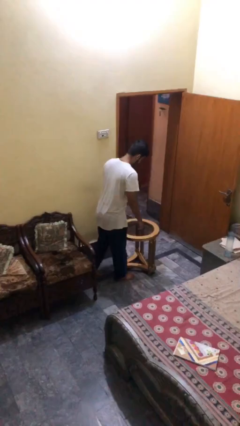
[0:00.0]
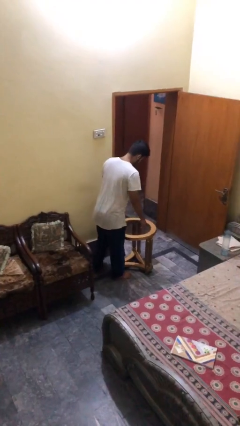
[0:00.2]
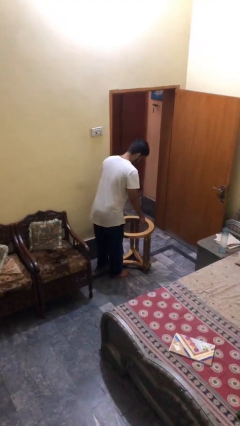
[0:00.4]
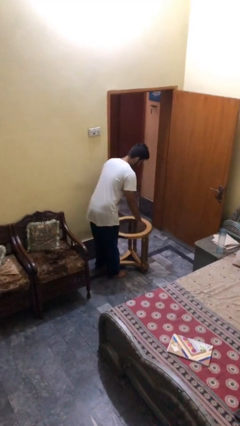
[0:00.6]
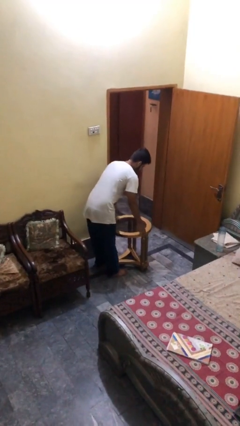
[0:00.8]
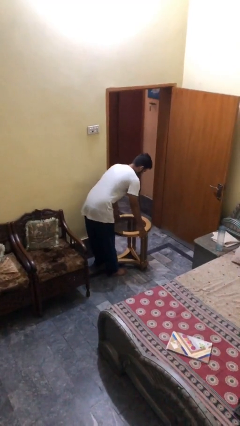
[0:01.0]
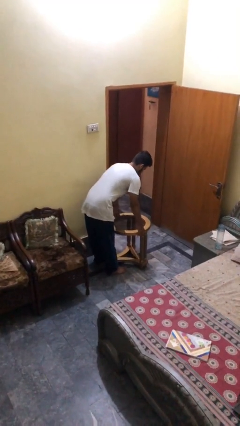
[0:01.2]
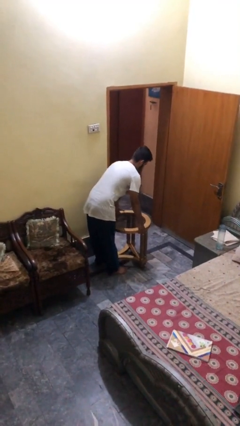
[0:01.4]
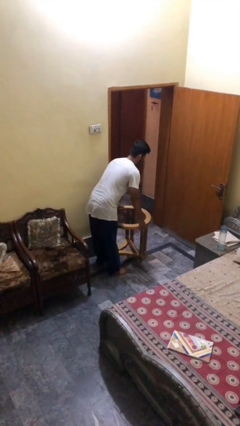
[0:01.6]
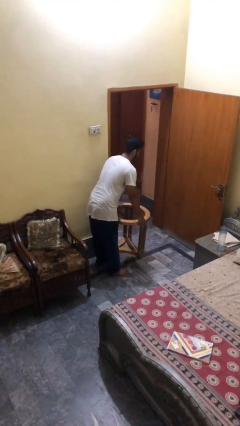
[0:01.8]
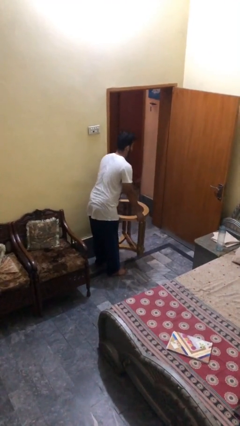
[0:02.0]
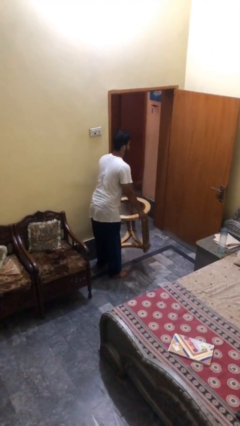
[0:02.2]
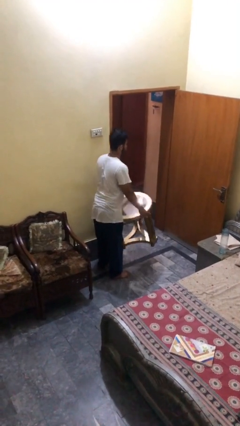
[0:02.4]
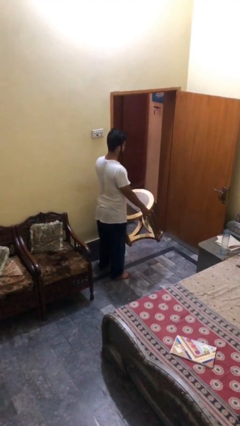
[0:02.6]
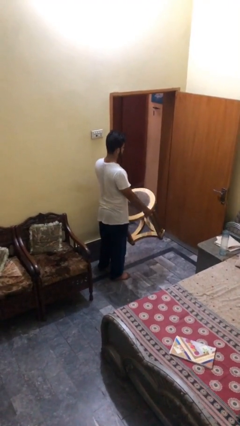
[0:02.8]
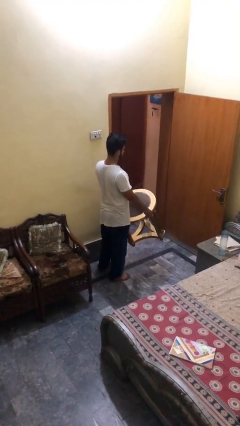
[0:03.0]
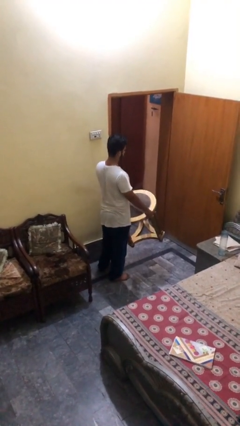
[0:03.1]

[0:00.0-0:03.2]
person picks up object from floor

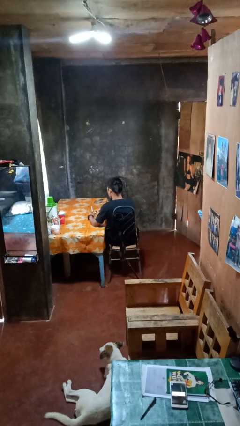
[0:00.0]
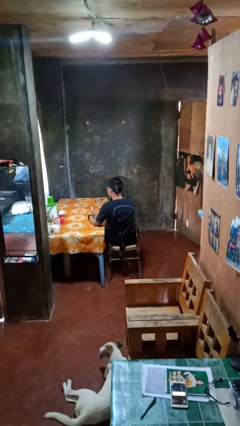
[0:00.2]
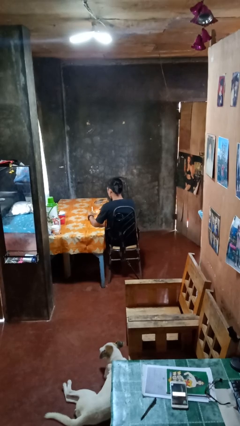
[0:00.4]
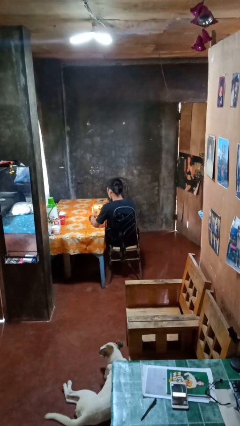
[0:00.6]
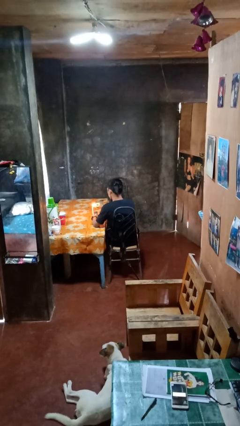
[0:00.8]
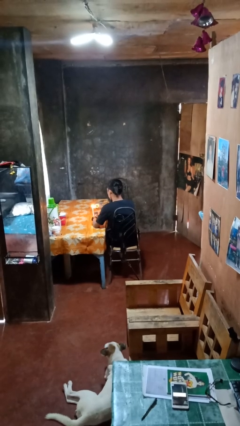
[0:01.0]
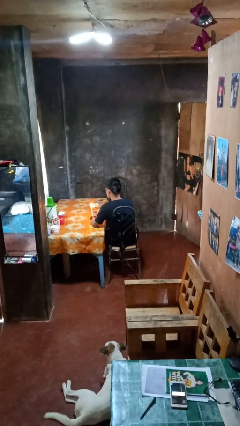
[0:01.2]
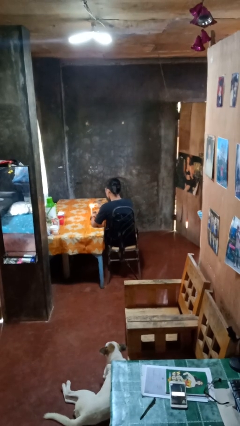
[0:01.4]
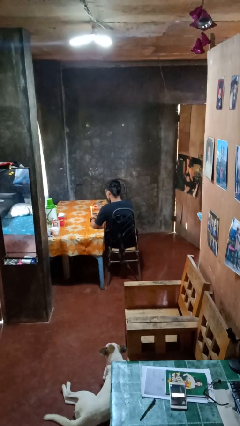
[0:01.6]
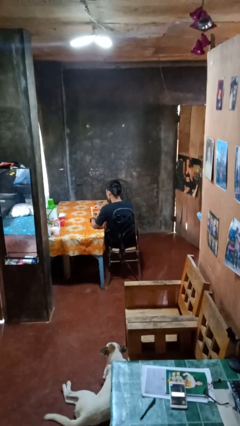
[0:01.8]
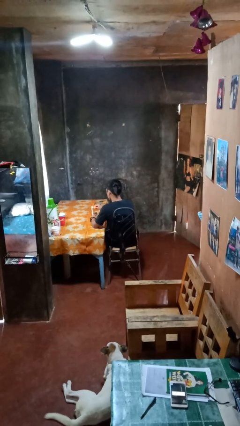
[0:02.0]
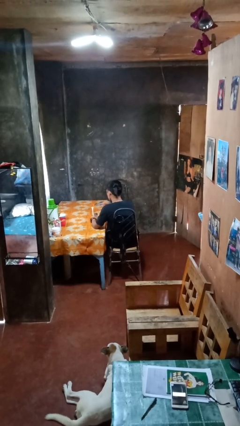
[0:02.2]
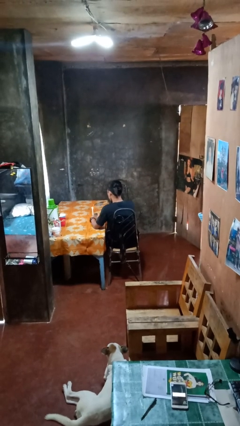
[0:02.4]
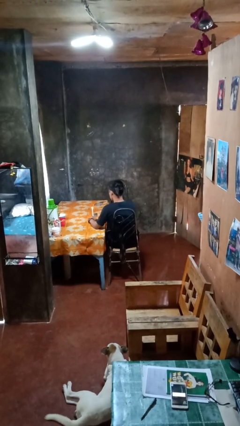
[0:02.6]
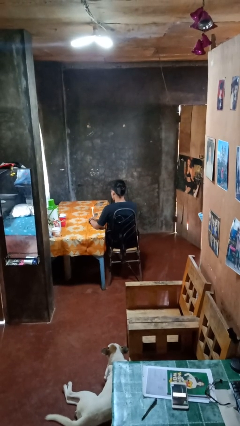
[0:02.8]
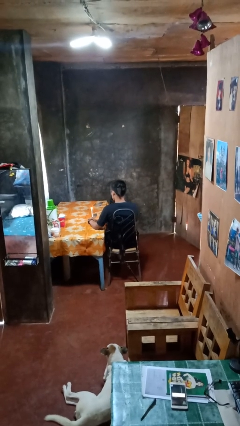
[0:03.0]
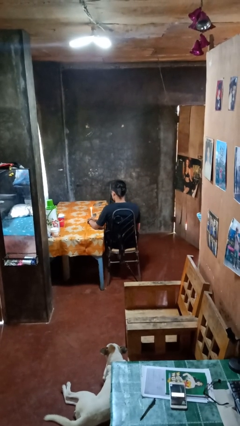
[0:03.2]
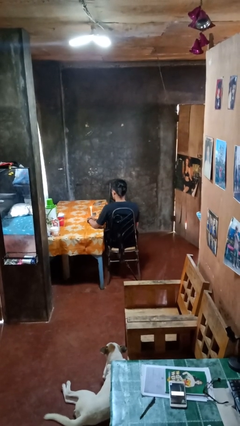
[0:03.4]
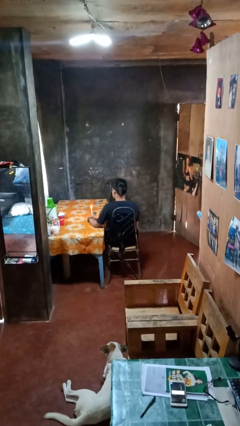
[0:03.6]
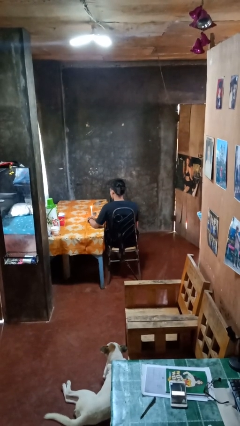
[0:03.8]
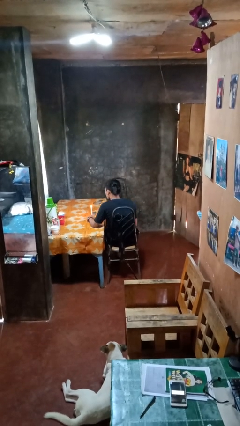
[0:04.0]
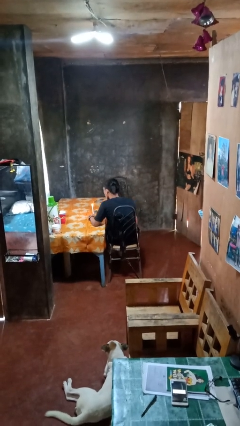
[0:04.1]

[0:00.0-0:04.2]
person lights candle

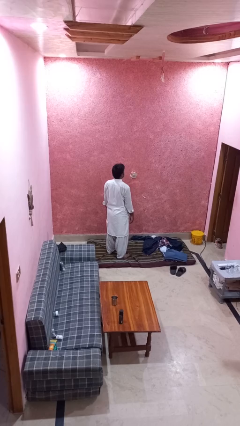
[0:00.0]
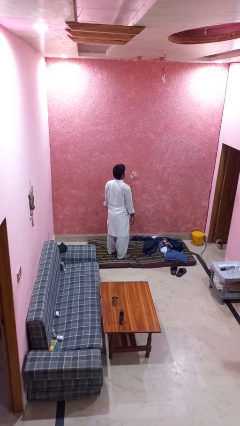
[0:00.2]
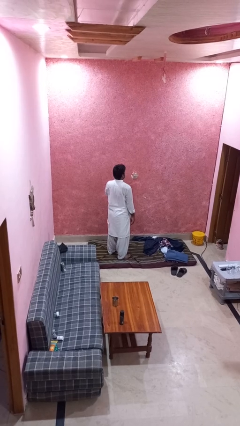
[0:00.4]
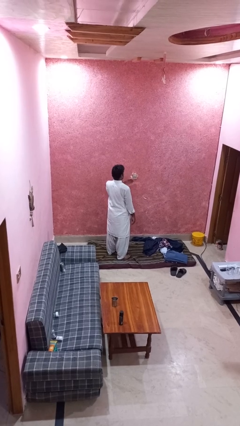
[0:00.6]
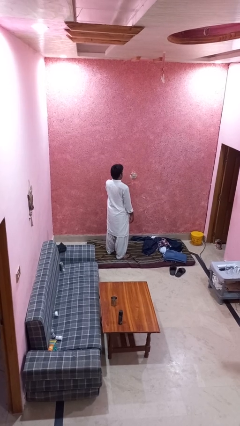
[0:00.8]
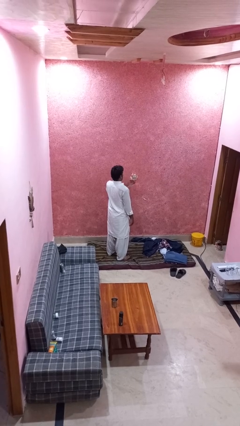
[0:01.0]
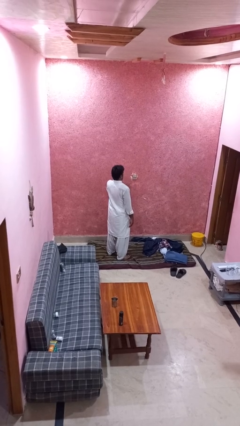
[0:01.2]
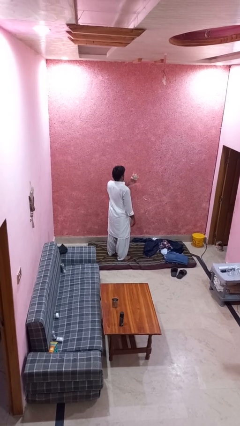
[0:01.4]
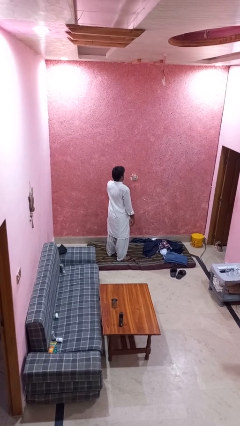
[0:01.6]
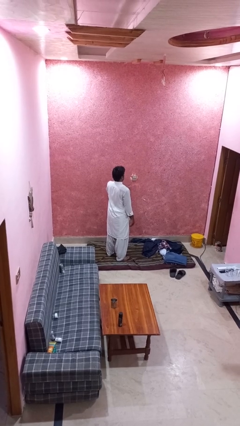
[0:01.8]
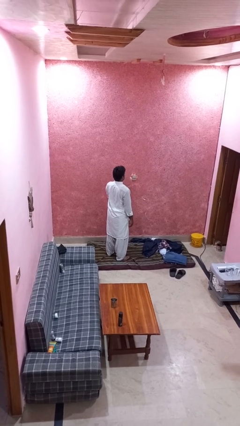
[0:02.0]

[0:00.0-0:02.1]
person drums on chest

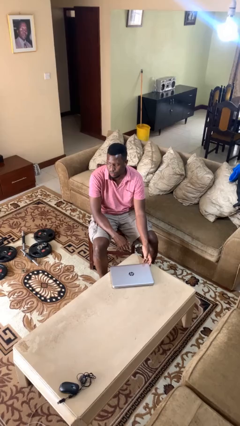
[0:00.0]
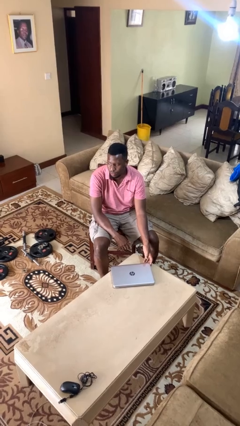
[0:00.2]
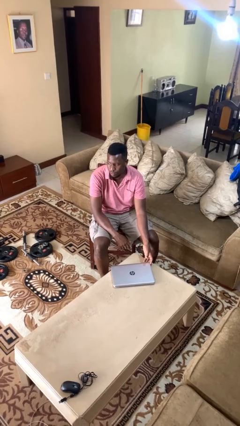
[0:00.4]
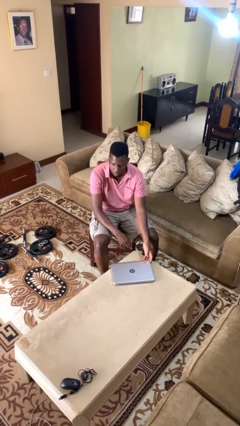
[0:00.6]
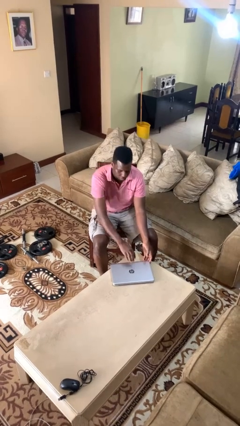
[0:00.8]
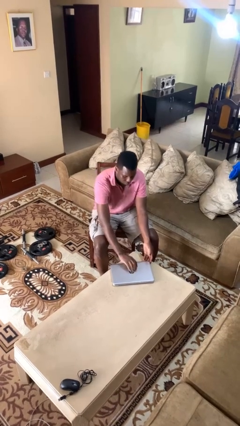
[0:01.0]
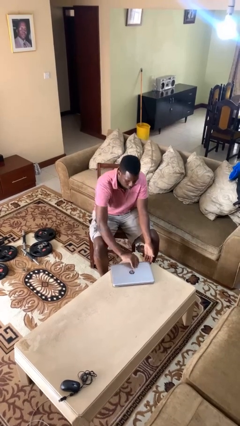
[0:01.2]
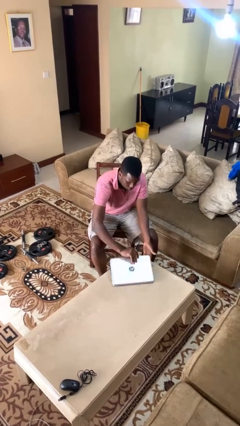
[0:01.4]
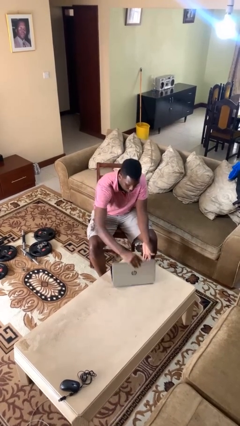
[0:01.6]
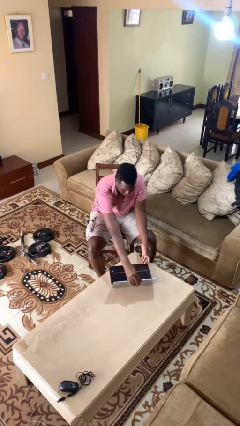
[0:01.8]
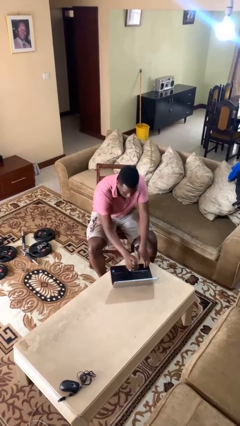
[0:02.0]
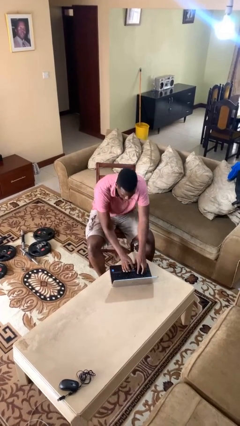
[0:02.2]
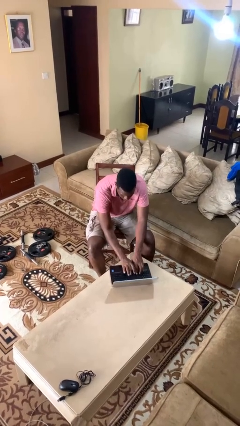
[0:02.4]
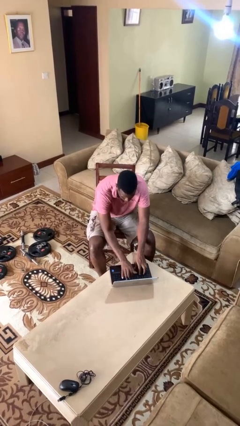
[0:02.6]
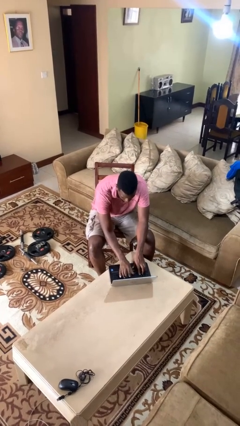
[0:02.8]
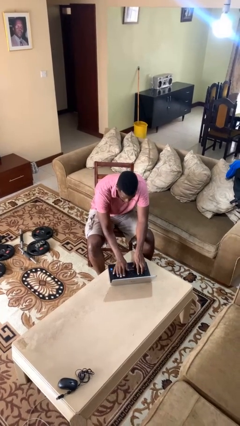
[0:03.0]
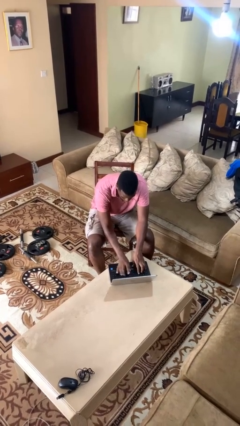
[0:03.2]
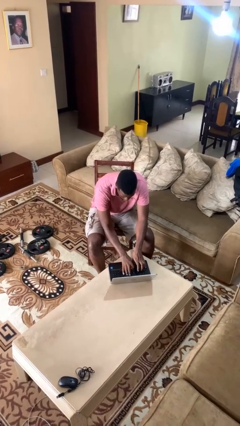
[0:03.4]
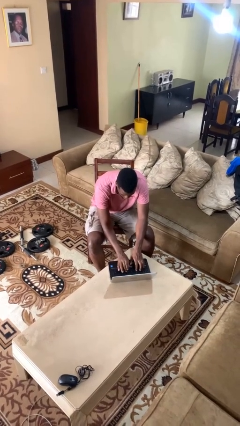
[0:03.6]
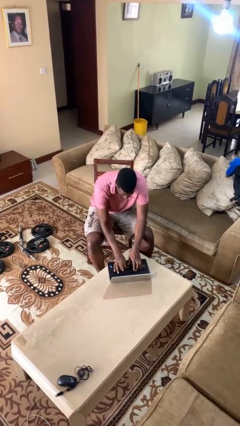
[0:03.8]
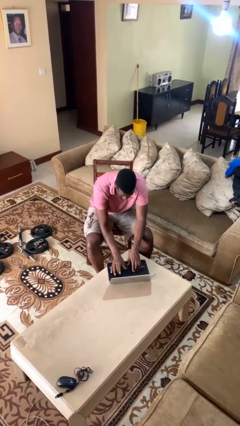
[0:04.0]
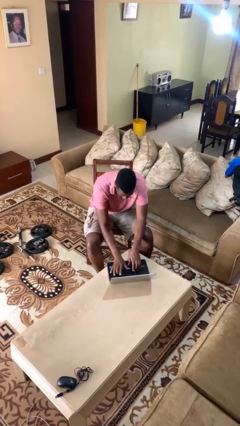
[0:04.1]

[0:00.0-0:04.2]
person interacts with laptop

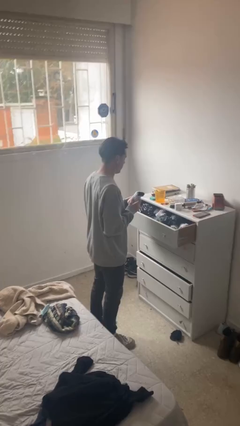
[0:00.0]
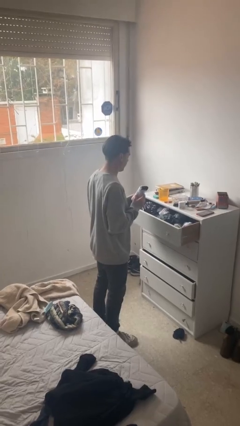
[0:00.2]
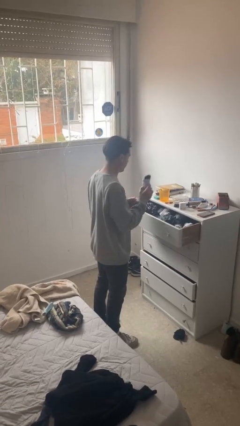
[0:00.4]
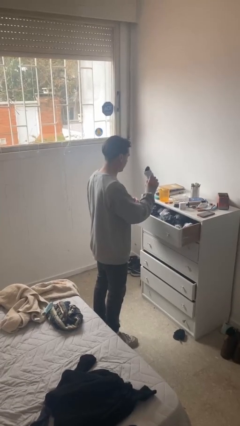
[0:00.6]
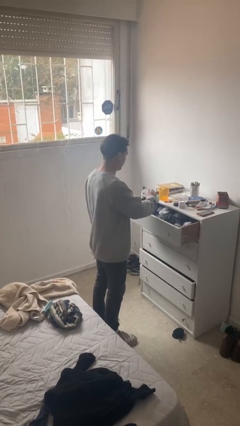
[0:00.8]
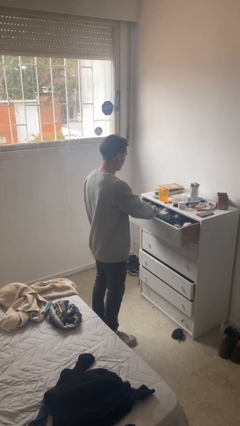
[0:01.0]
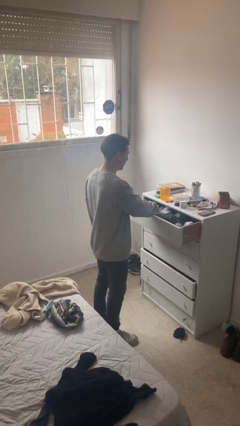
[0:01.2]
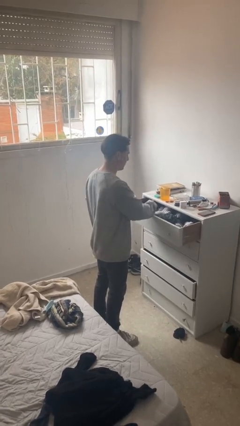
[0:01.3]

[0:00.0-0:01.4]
person puts clothes into dresser

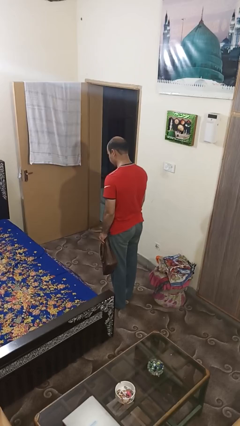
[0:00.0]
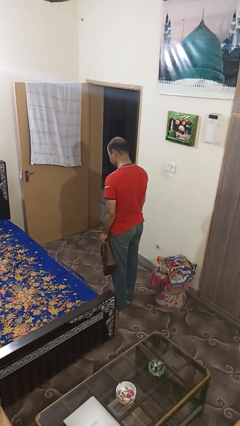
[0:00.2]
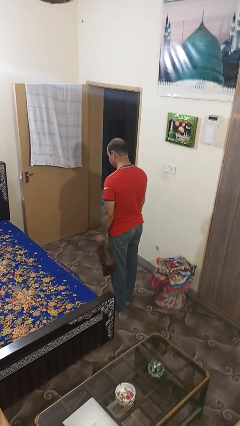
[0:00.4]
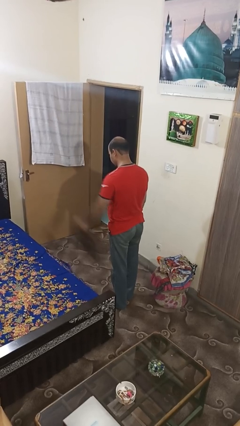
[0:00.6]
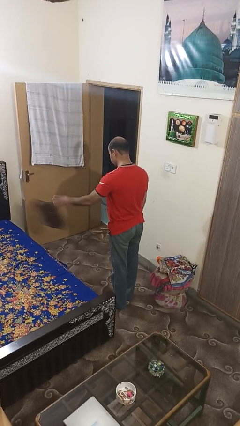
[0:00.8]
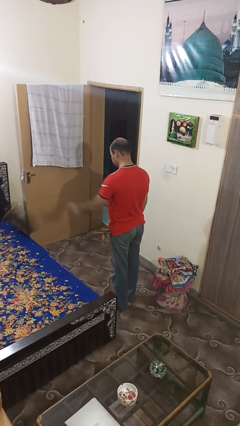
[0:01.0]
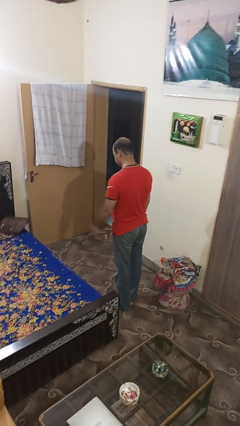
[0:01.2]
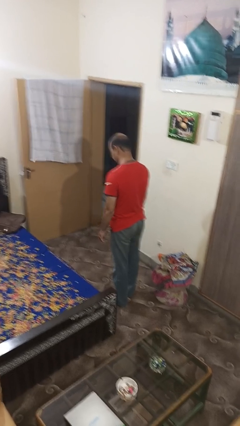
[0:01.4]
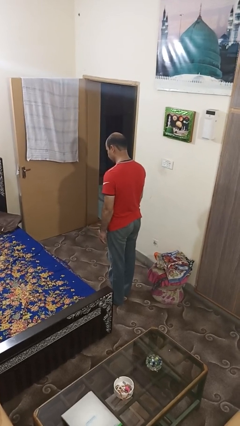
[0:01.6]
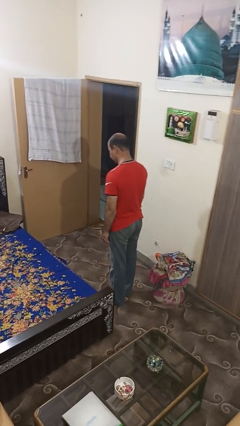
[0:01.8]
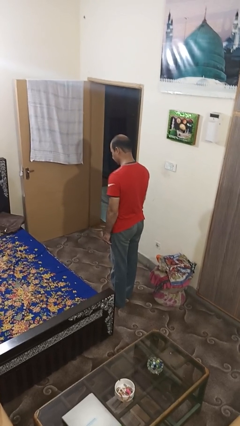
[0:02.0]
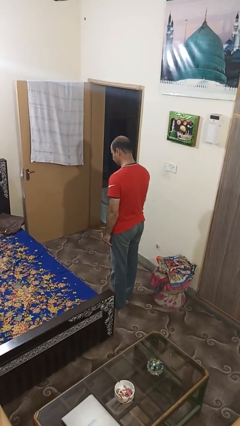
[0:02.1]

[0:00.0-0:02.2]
person throws object on bed

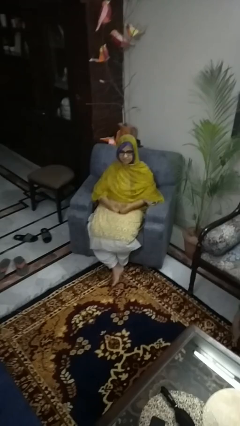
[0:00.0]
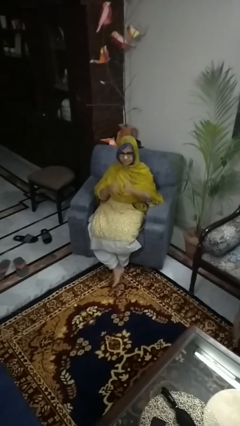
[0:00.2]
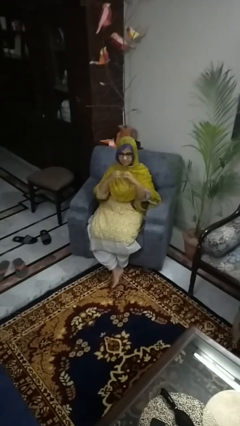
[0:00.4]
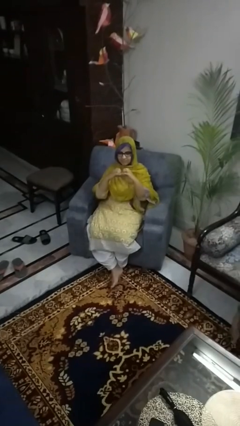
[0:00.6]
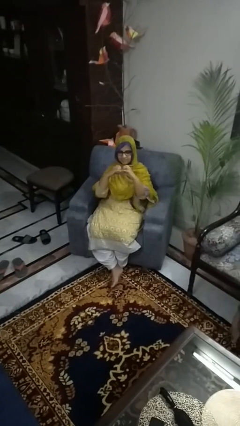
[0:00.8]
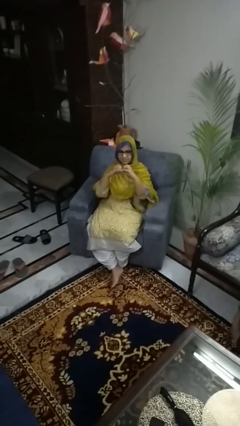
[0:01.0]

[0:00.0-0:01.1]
person gestures heart
